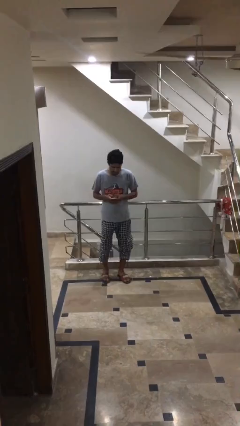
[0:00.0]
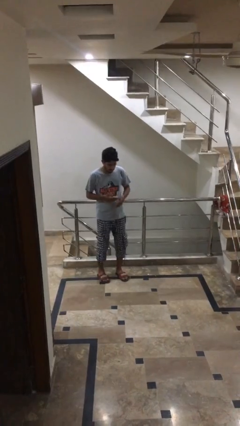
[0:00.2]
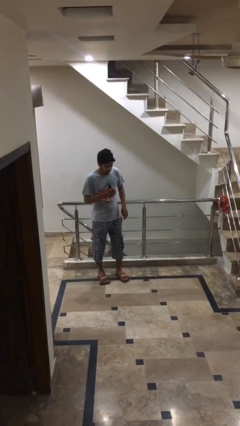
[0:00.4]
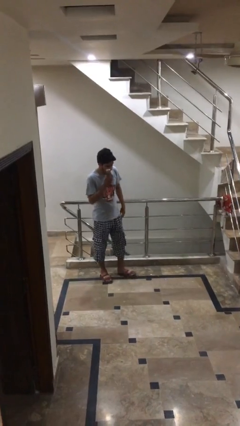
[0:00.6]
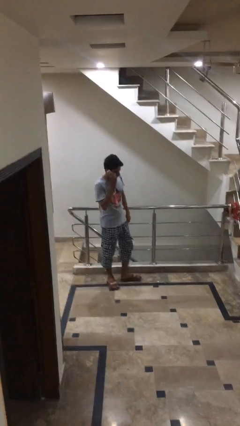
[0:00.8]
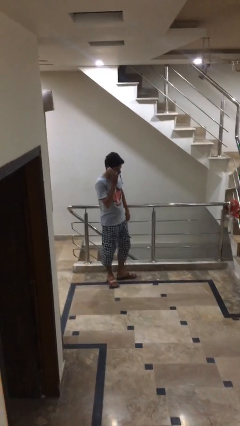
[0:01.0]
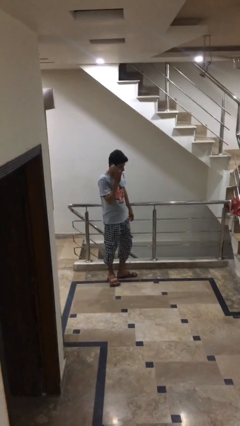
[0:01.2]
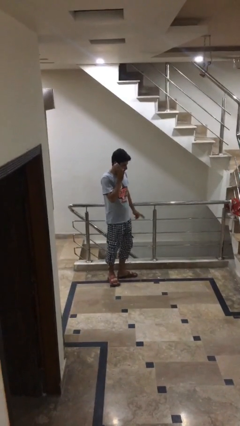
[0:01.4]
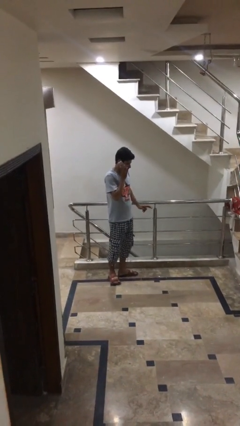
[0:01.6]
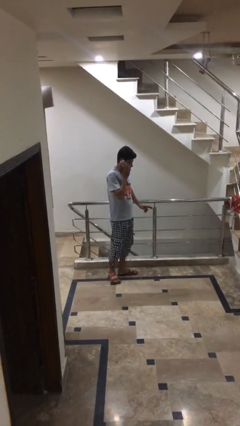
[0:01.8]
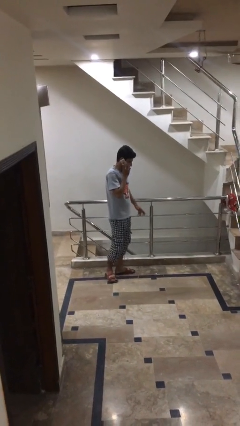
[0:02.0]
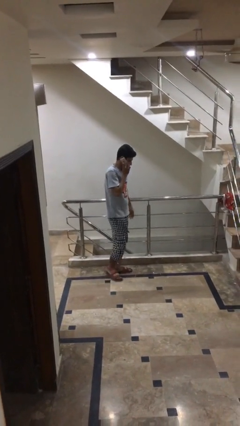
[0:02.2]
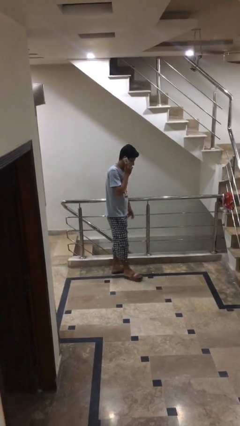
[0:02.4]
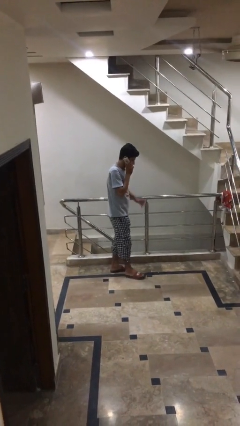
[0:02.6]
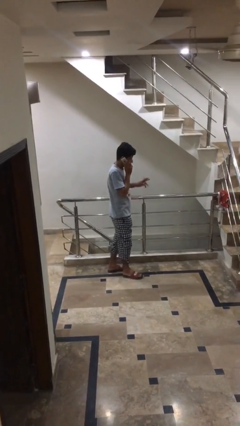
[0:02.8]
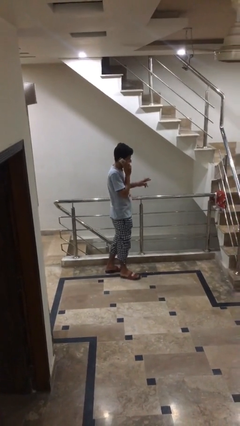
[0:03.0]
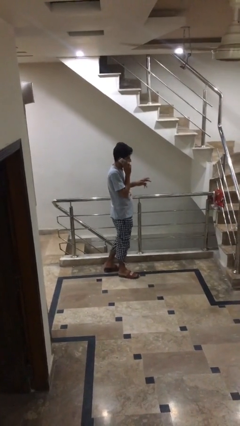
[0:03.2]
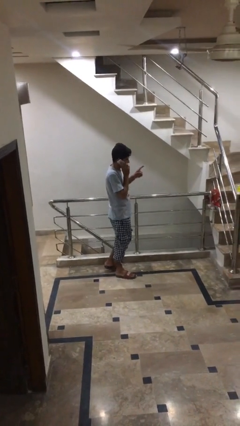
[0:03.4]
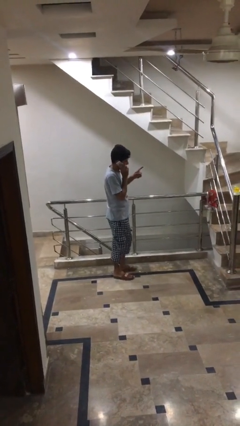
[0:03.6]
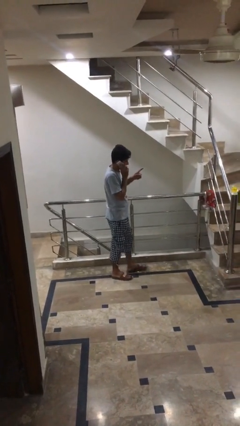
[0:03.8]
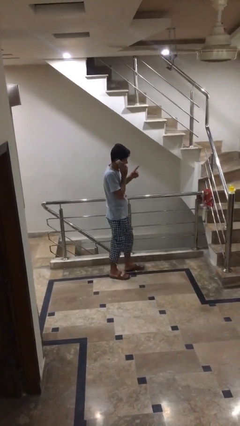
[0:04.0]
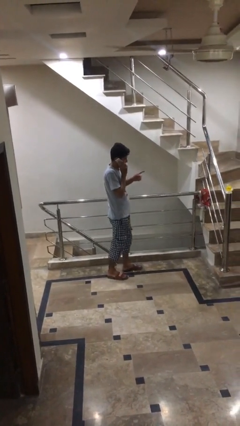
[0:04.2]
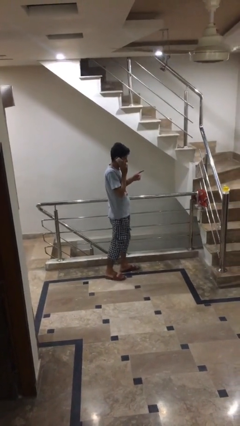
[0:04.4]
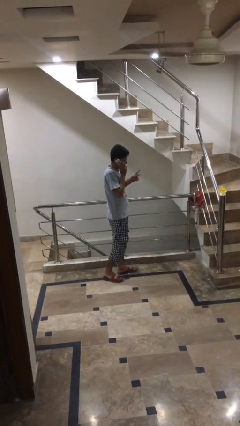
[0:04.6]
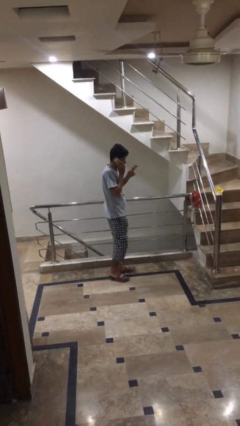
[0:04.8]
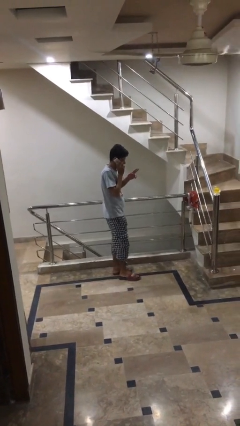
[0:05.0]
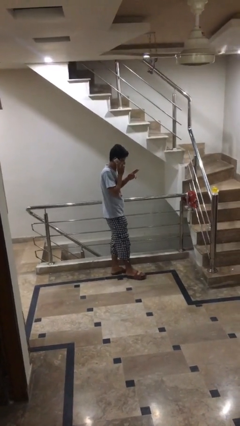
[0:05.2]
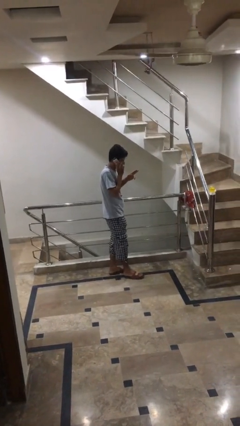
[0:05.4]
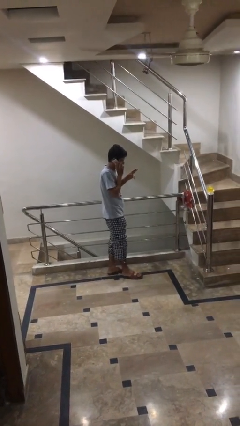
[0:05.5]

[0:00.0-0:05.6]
person talks on phone

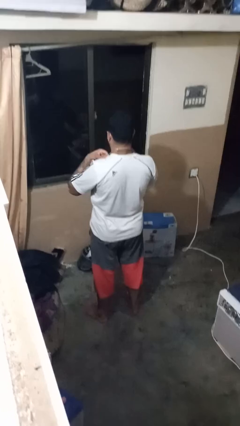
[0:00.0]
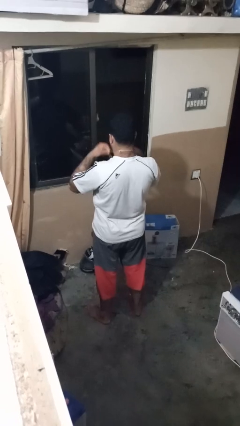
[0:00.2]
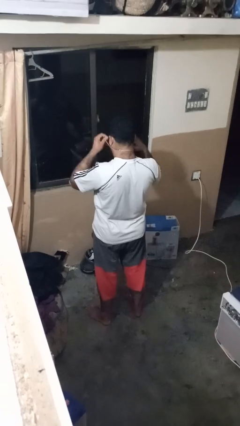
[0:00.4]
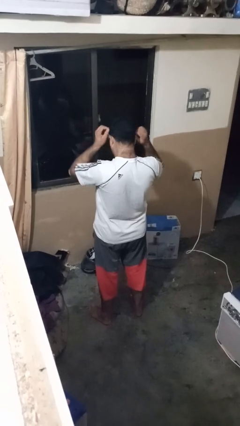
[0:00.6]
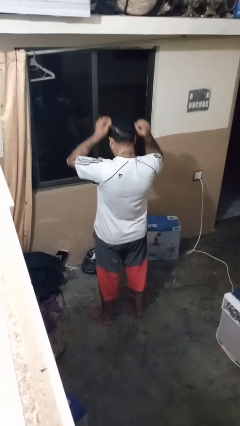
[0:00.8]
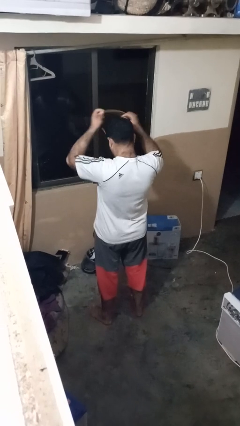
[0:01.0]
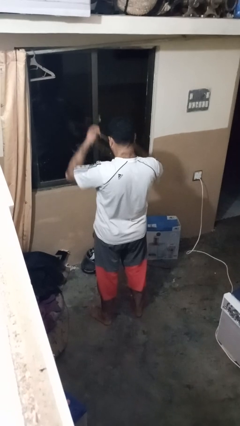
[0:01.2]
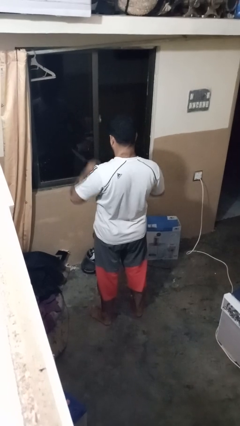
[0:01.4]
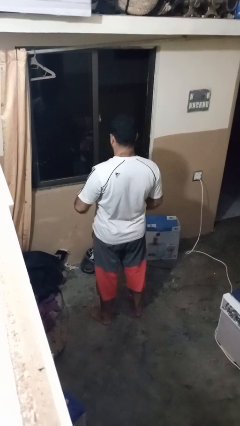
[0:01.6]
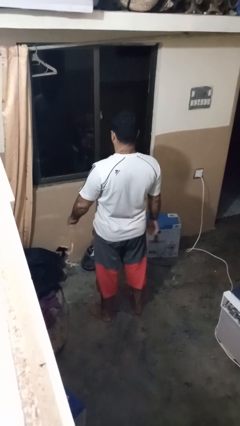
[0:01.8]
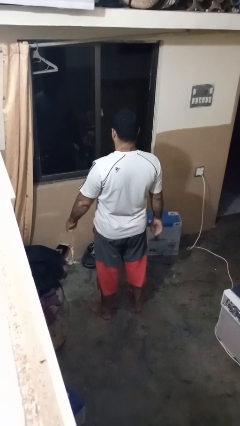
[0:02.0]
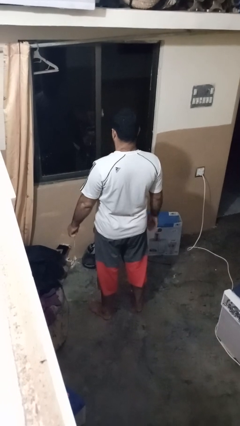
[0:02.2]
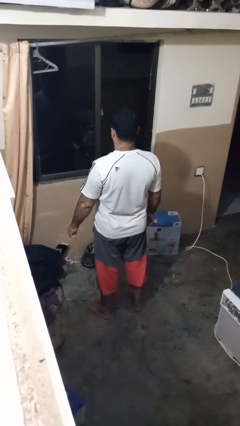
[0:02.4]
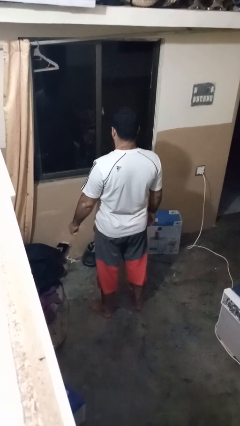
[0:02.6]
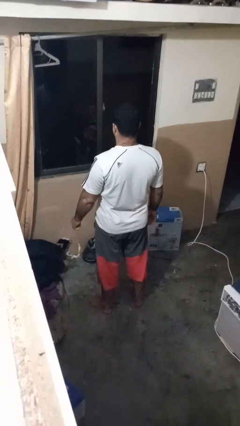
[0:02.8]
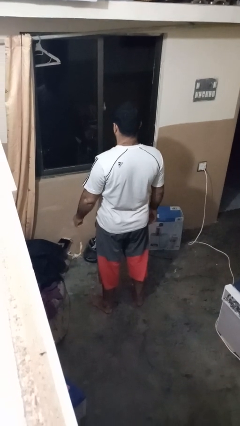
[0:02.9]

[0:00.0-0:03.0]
person takes off necklace

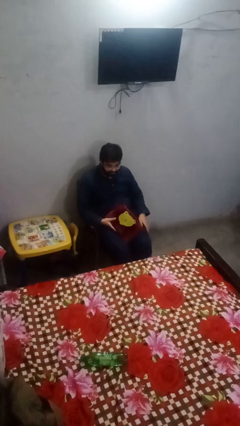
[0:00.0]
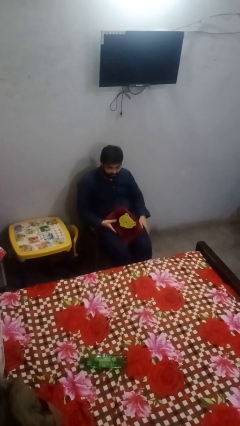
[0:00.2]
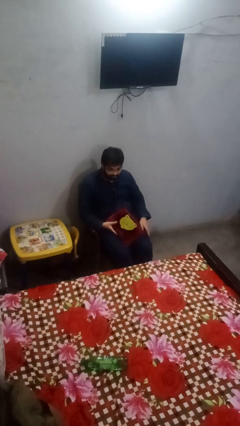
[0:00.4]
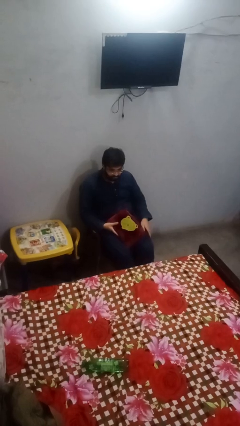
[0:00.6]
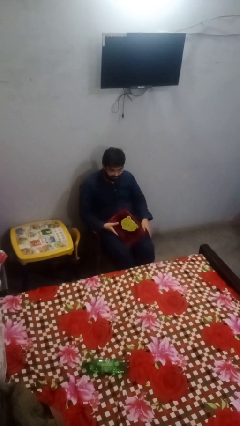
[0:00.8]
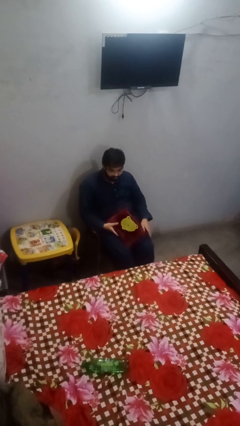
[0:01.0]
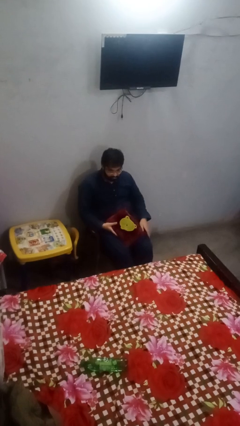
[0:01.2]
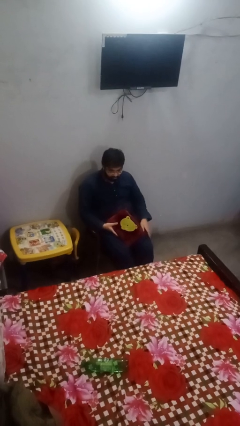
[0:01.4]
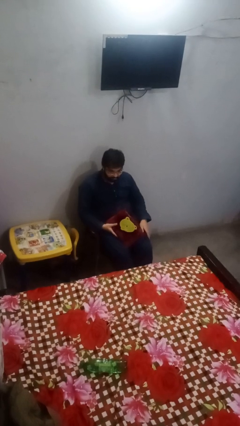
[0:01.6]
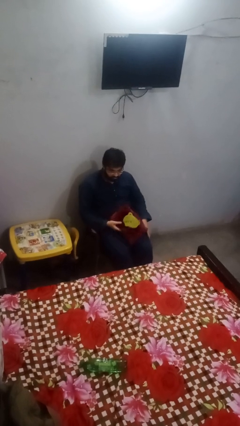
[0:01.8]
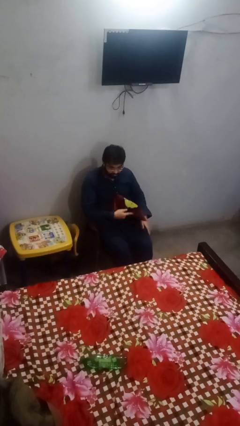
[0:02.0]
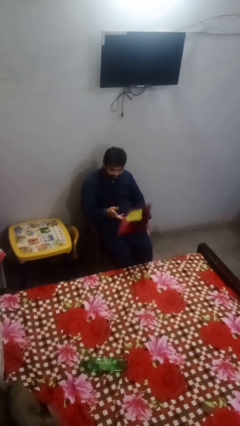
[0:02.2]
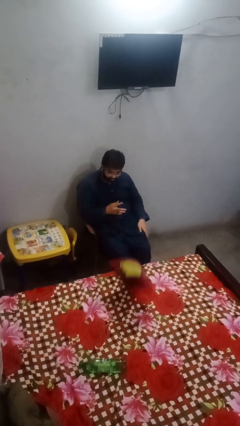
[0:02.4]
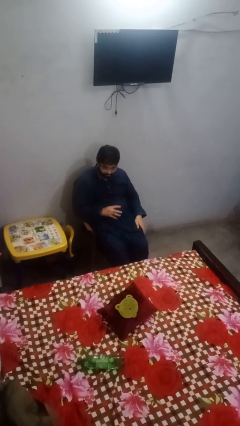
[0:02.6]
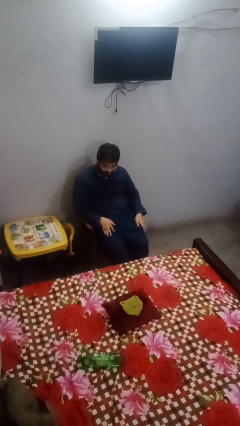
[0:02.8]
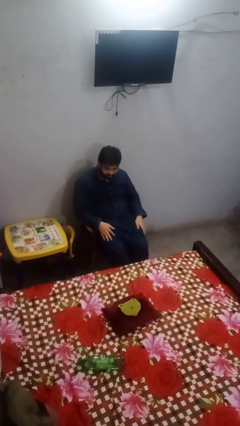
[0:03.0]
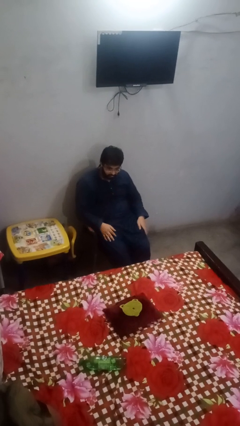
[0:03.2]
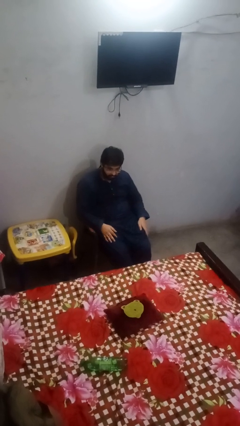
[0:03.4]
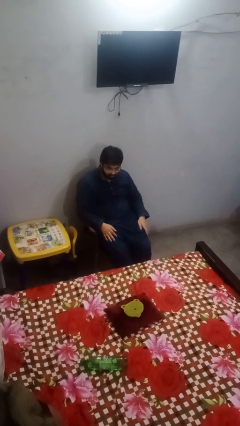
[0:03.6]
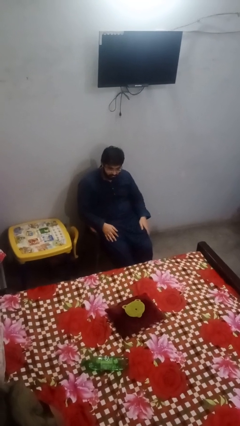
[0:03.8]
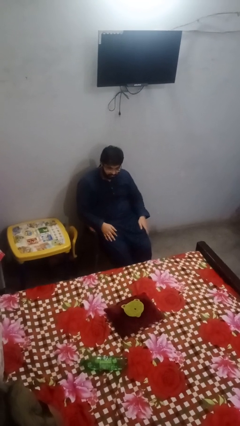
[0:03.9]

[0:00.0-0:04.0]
person throws object on bed

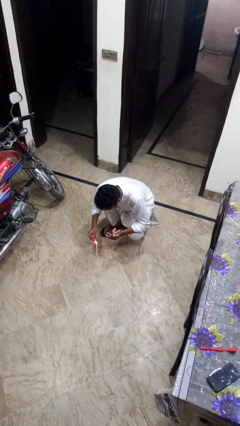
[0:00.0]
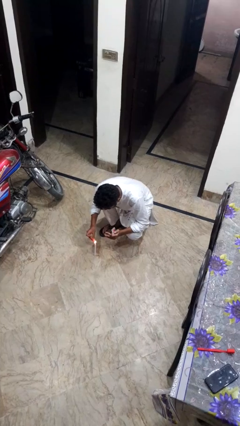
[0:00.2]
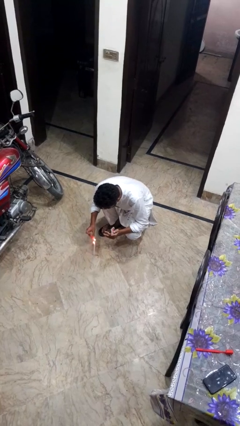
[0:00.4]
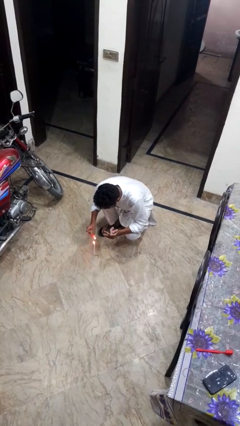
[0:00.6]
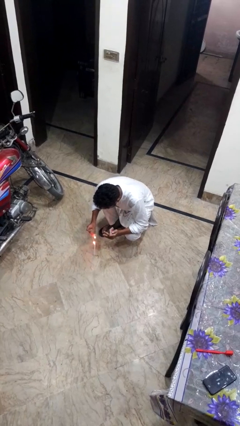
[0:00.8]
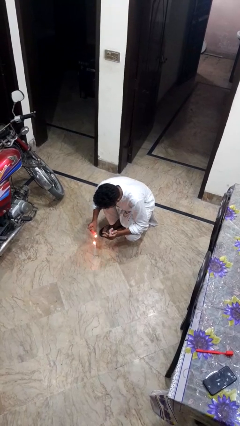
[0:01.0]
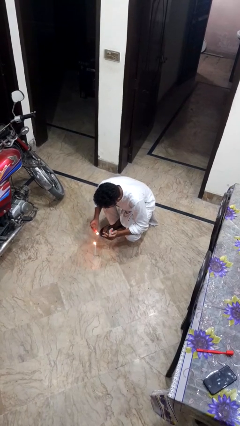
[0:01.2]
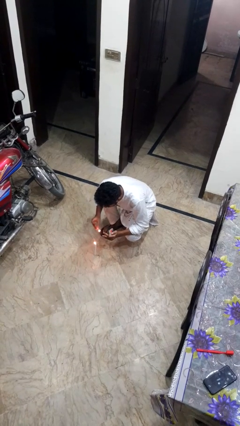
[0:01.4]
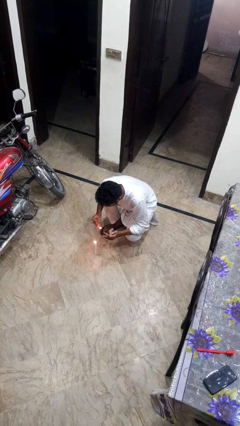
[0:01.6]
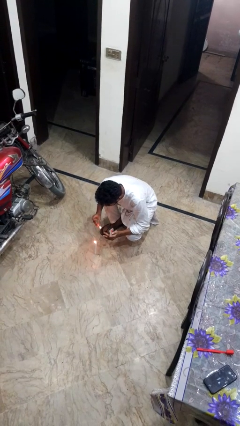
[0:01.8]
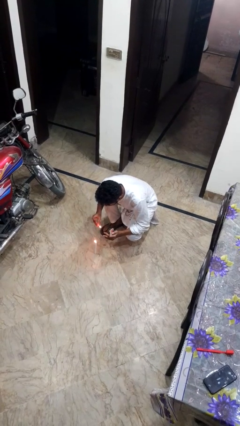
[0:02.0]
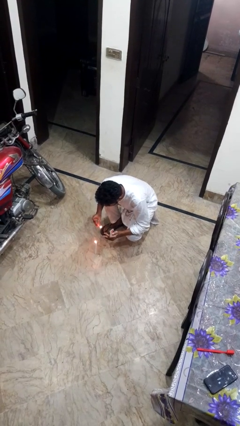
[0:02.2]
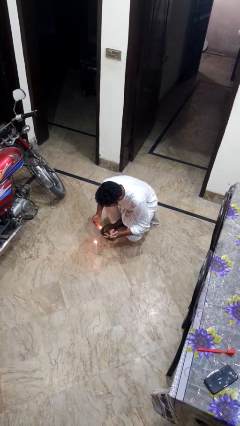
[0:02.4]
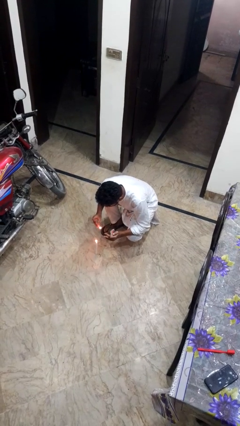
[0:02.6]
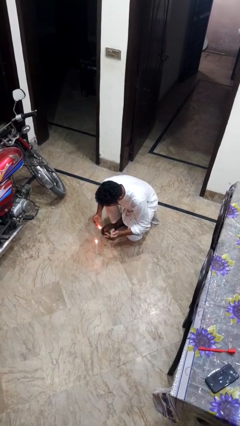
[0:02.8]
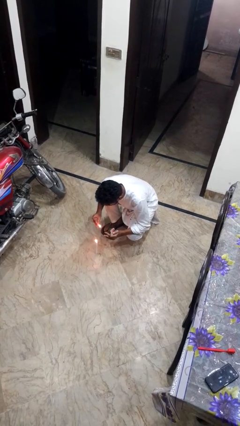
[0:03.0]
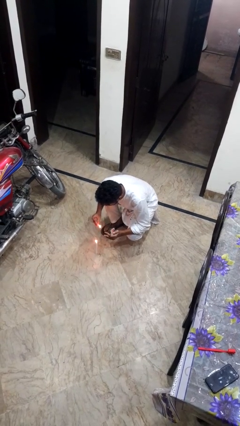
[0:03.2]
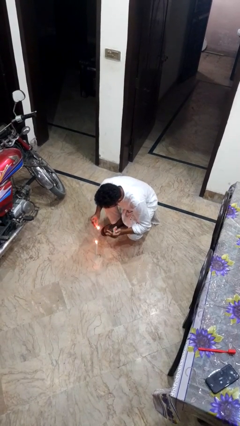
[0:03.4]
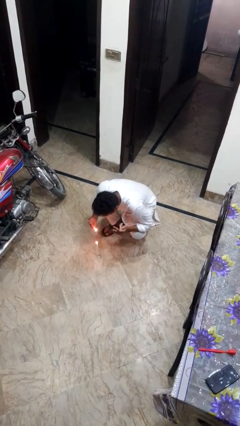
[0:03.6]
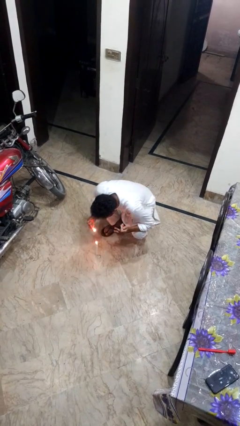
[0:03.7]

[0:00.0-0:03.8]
person lights candle

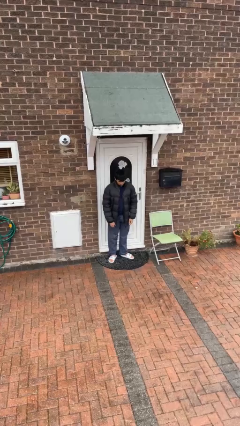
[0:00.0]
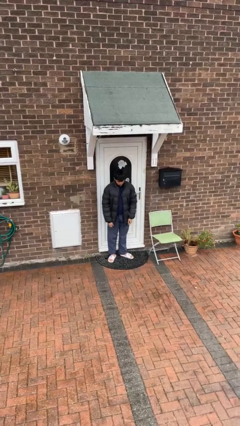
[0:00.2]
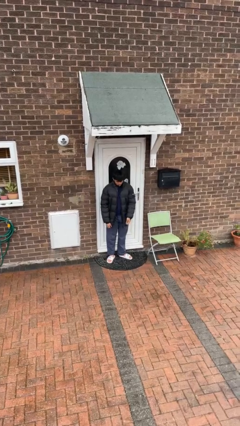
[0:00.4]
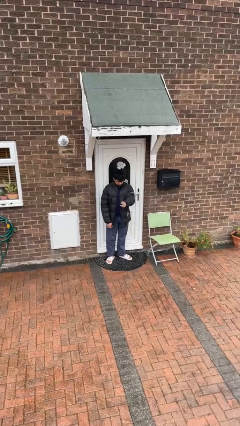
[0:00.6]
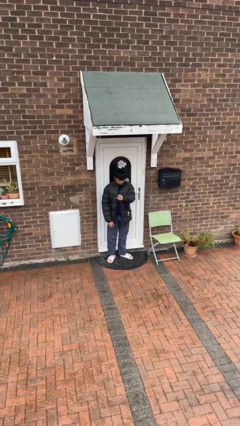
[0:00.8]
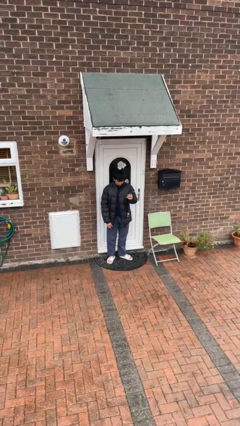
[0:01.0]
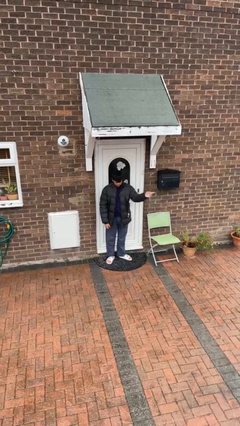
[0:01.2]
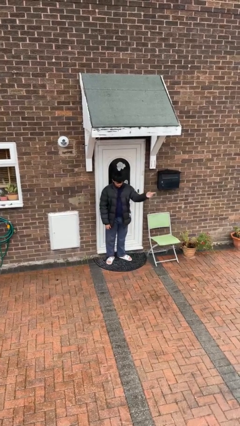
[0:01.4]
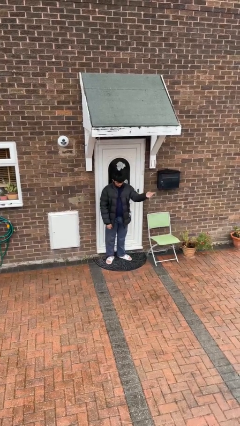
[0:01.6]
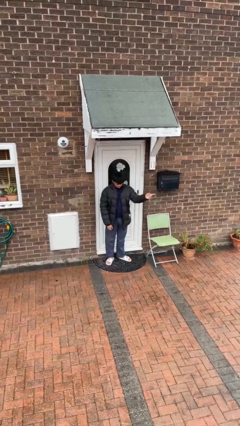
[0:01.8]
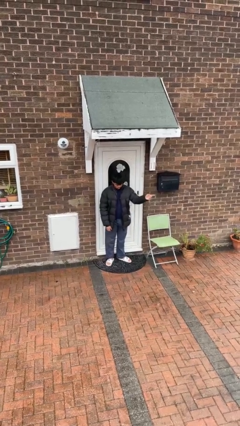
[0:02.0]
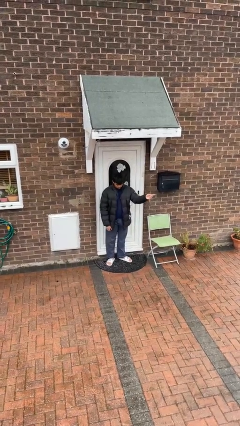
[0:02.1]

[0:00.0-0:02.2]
person gestures swipe left
